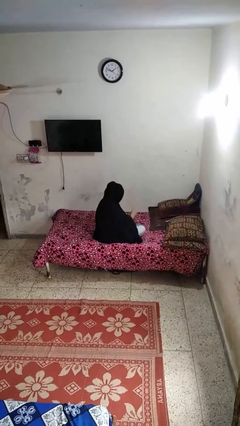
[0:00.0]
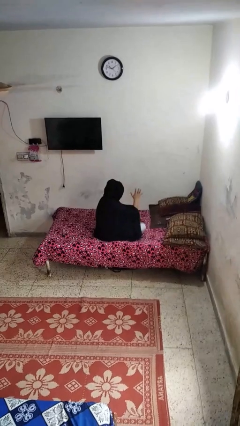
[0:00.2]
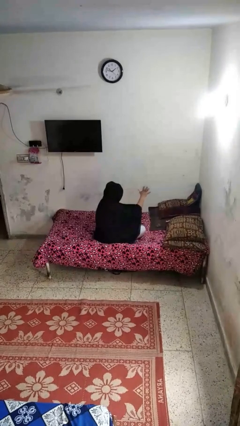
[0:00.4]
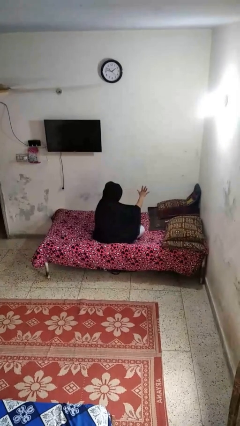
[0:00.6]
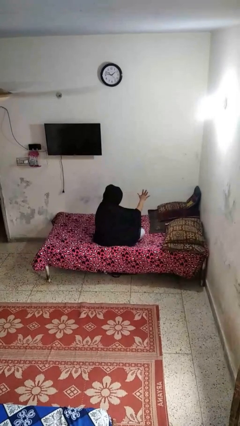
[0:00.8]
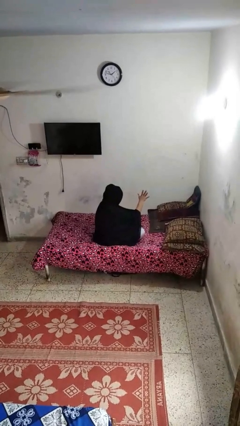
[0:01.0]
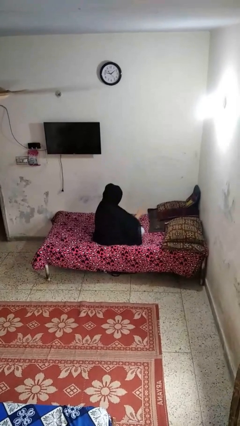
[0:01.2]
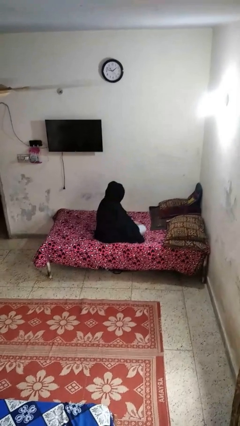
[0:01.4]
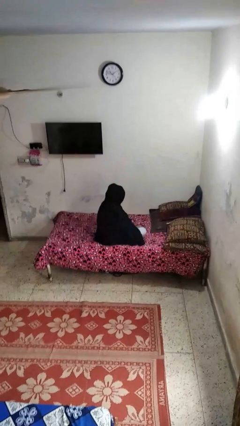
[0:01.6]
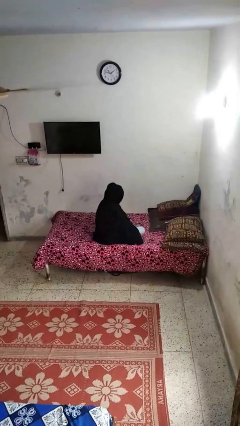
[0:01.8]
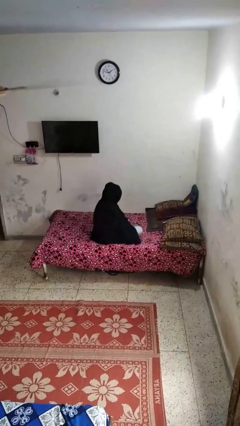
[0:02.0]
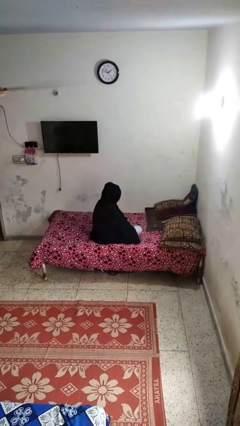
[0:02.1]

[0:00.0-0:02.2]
person gestures number five

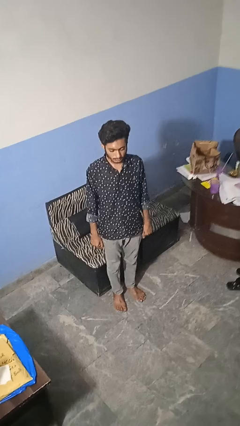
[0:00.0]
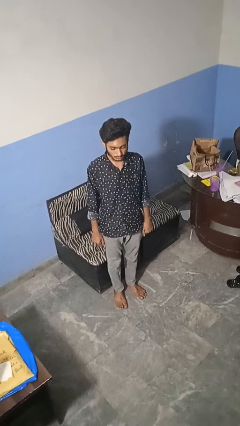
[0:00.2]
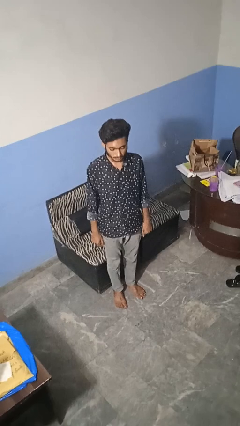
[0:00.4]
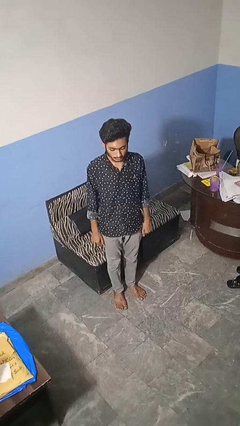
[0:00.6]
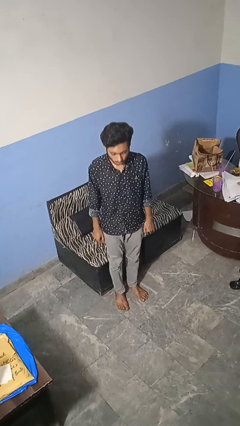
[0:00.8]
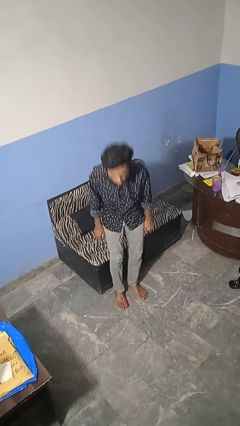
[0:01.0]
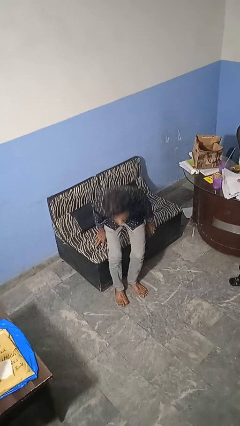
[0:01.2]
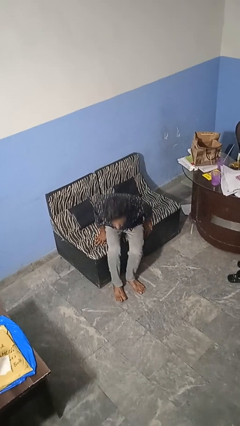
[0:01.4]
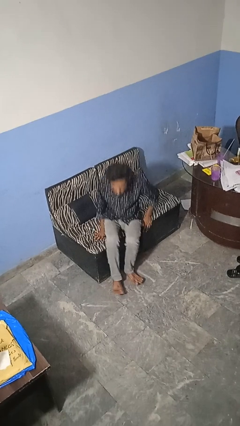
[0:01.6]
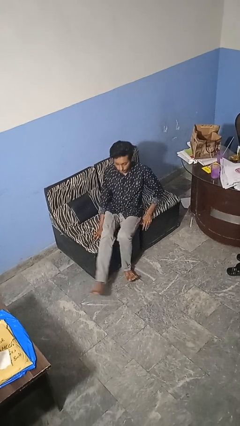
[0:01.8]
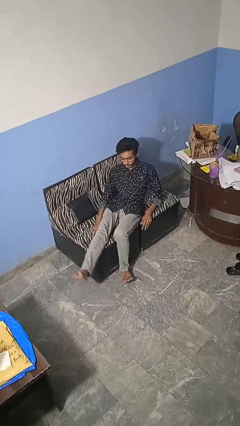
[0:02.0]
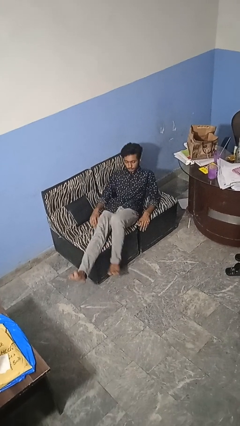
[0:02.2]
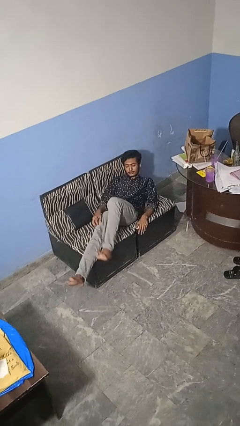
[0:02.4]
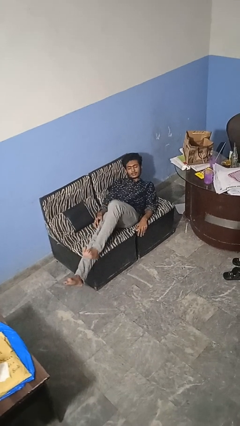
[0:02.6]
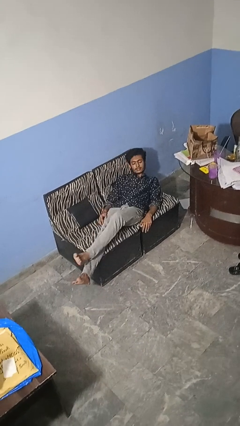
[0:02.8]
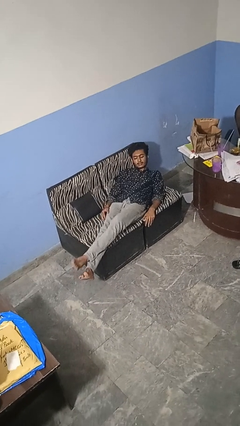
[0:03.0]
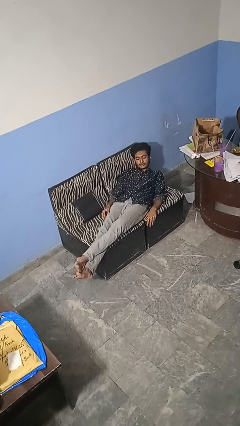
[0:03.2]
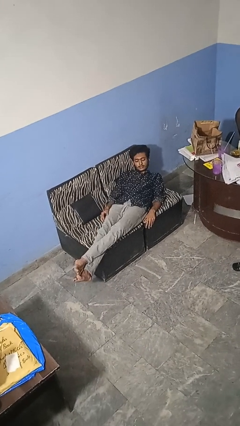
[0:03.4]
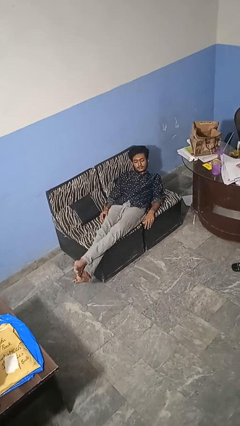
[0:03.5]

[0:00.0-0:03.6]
person lies down on couch

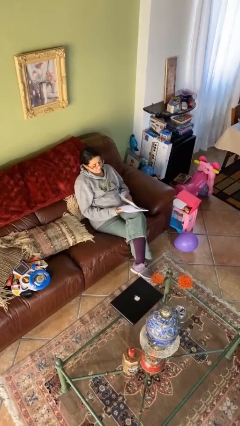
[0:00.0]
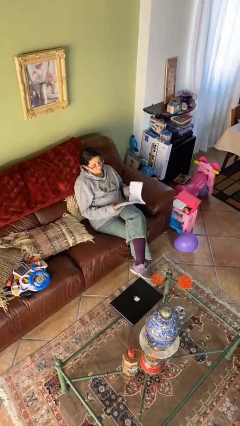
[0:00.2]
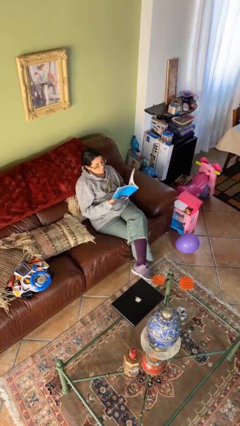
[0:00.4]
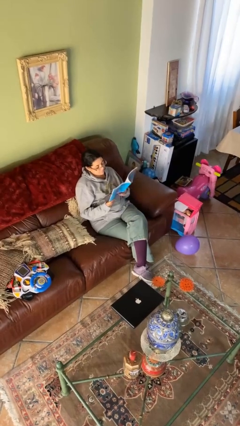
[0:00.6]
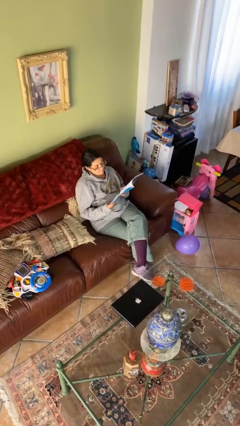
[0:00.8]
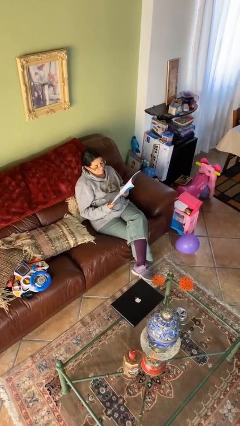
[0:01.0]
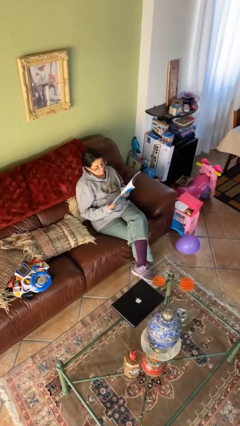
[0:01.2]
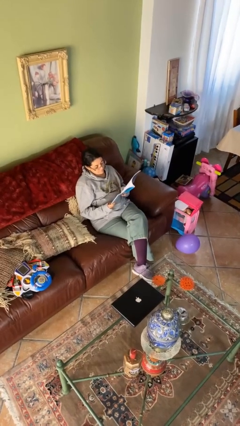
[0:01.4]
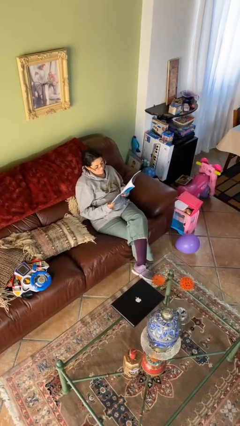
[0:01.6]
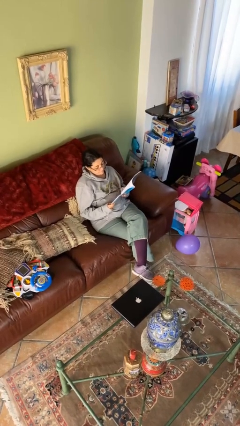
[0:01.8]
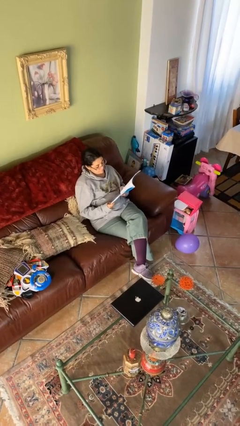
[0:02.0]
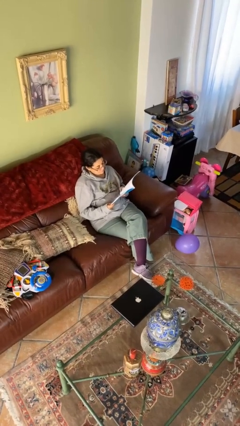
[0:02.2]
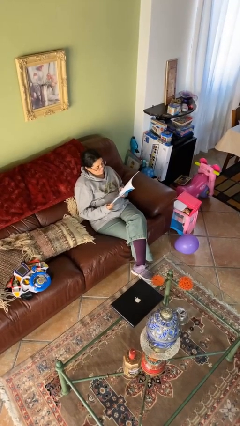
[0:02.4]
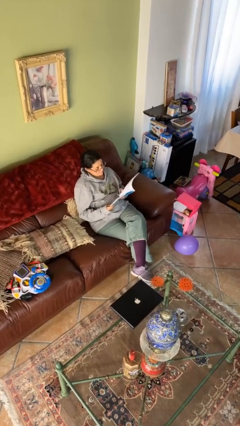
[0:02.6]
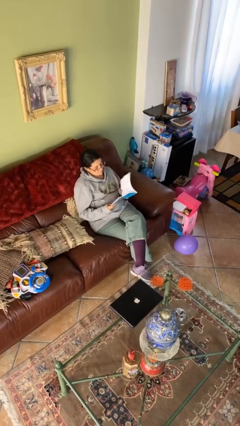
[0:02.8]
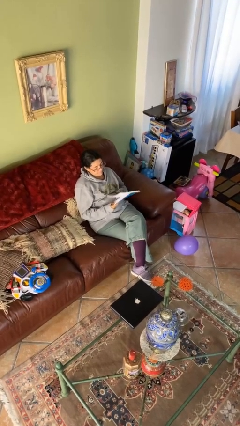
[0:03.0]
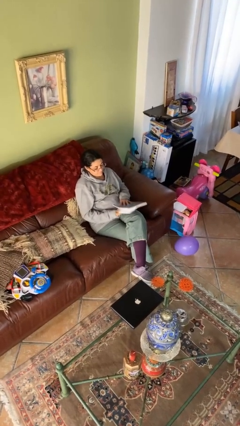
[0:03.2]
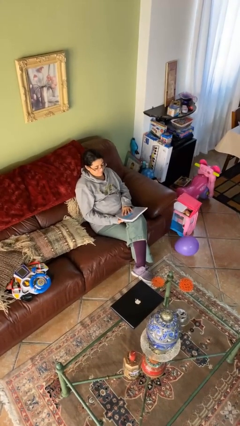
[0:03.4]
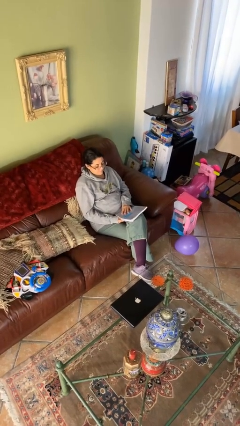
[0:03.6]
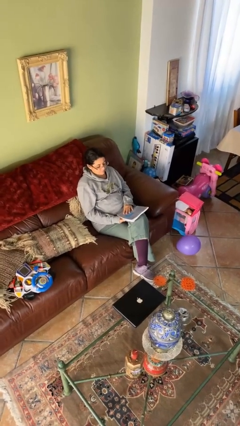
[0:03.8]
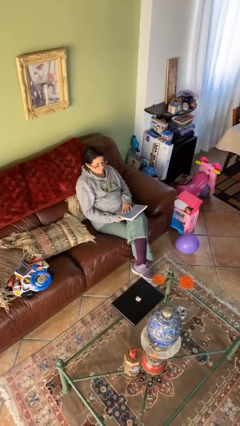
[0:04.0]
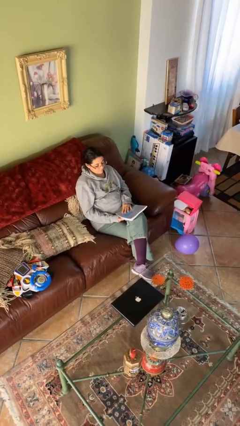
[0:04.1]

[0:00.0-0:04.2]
person reads document

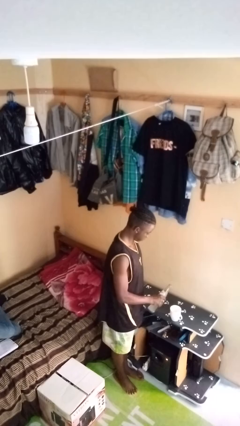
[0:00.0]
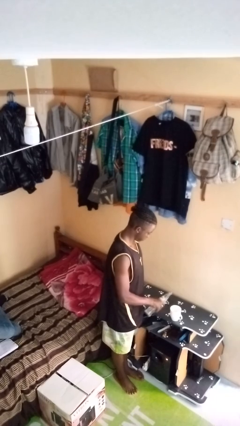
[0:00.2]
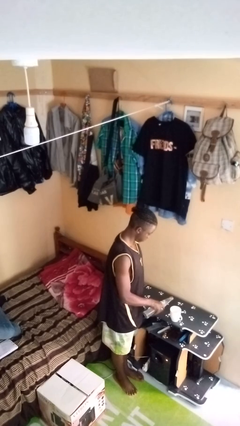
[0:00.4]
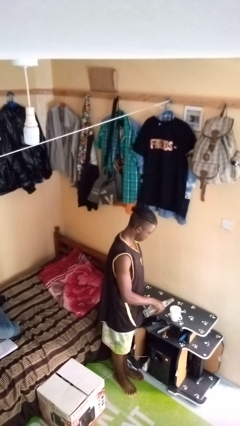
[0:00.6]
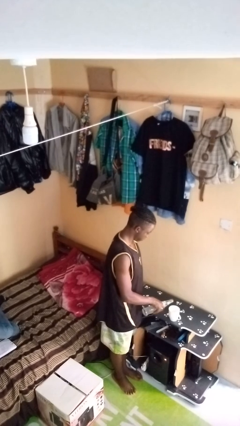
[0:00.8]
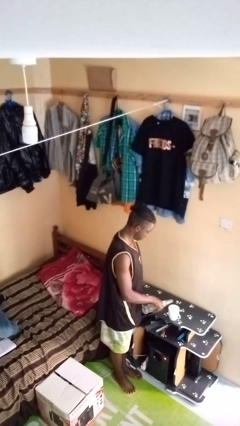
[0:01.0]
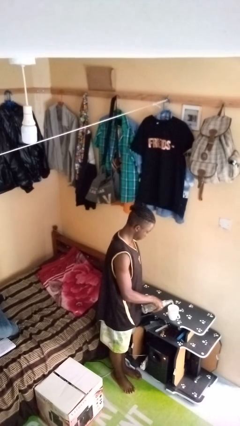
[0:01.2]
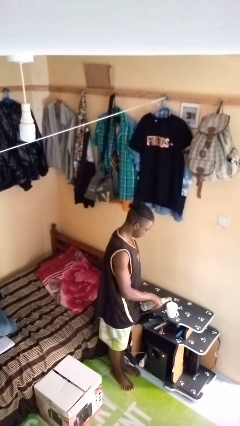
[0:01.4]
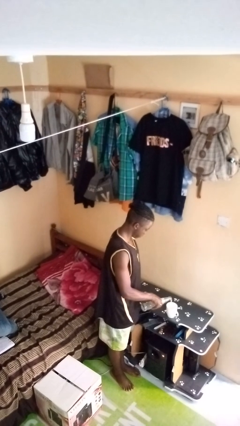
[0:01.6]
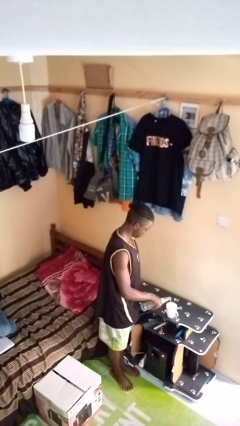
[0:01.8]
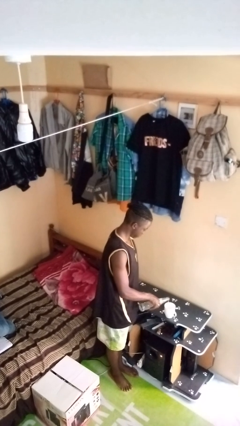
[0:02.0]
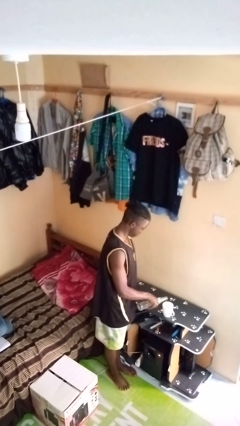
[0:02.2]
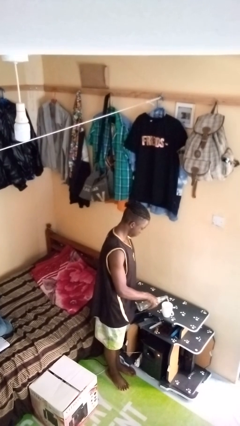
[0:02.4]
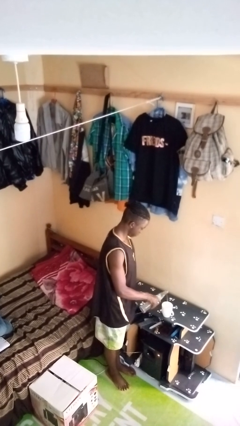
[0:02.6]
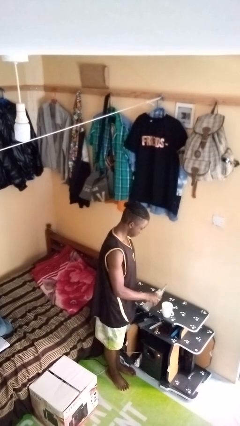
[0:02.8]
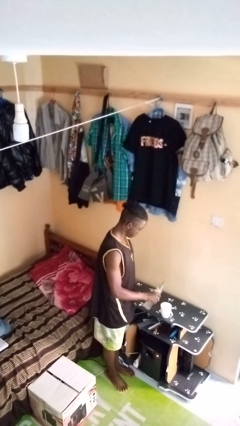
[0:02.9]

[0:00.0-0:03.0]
person pours liquid into cup

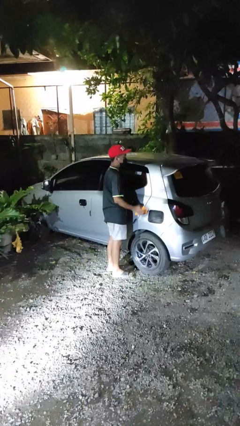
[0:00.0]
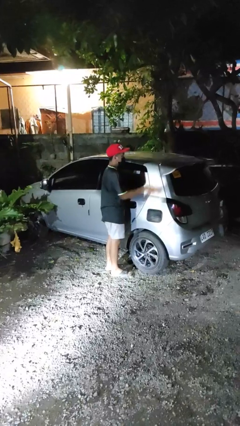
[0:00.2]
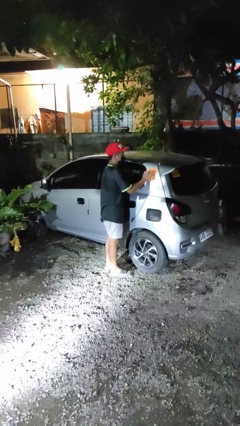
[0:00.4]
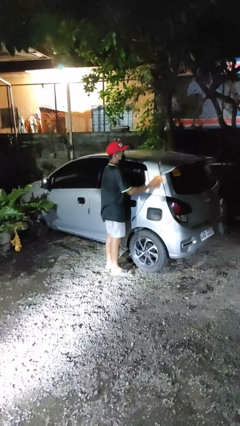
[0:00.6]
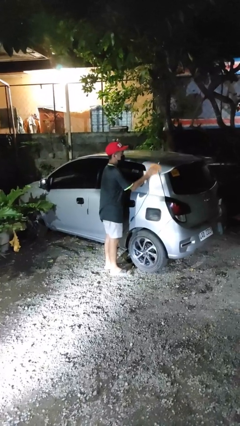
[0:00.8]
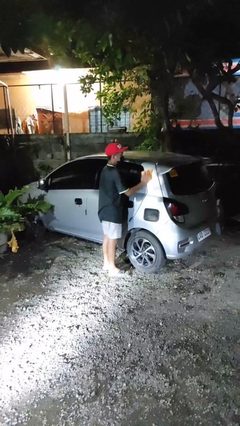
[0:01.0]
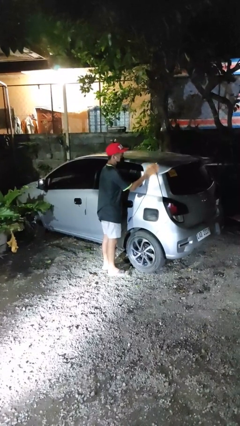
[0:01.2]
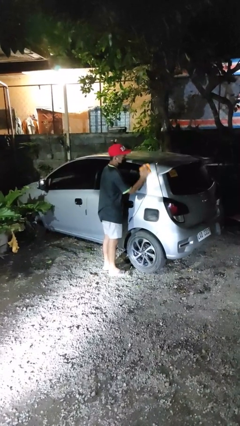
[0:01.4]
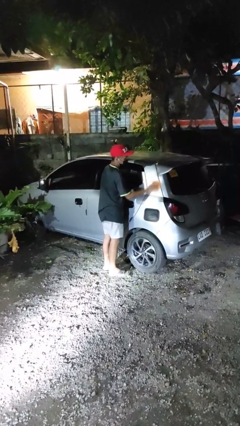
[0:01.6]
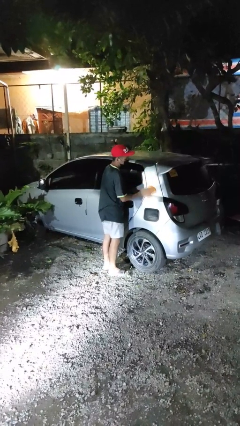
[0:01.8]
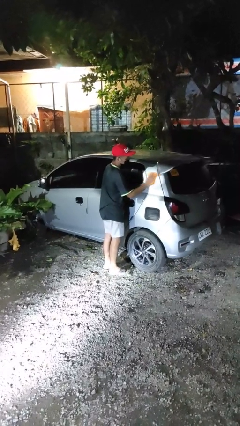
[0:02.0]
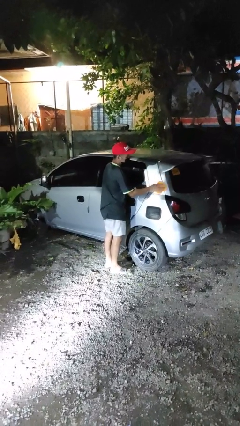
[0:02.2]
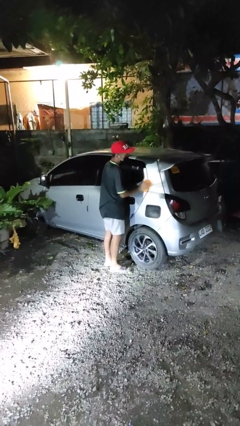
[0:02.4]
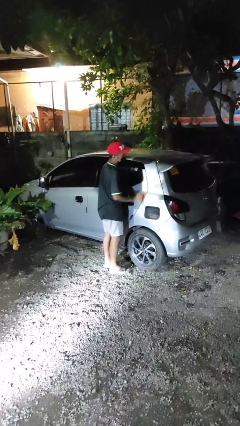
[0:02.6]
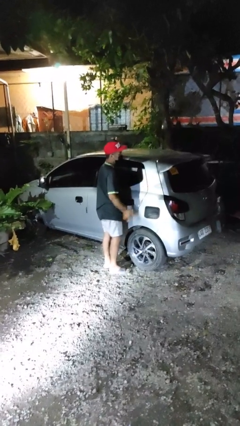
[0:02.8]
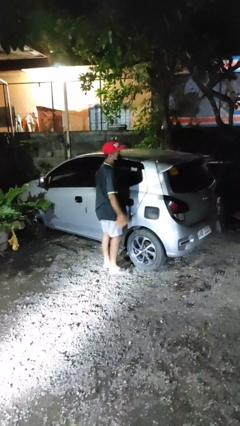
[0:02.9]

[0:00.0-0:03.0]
person polishes car with rag

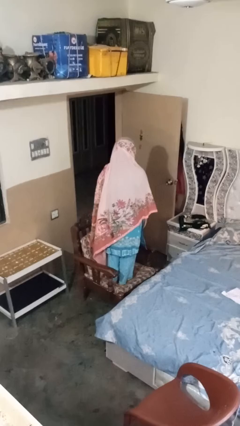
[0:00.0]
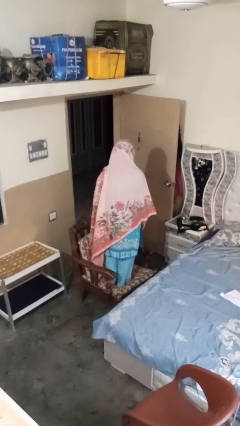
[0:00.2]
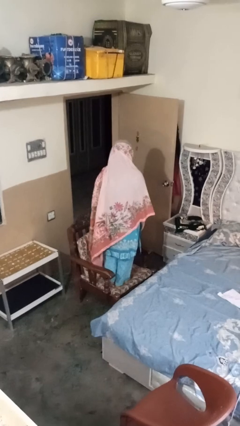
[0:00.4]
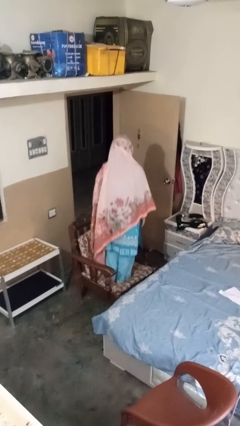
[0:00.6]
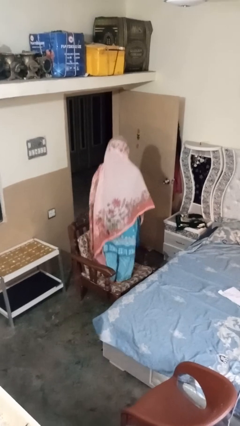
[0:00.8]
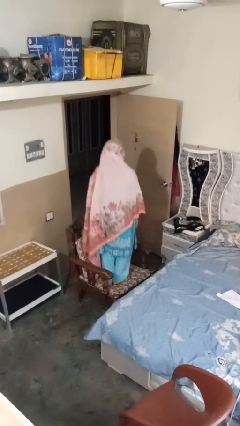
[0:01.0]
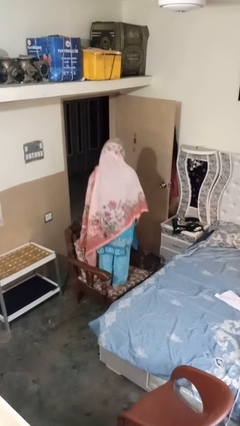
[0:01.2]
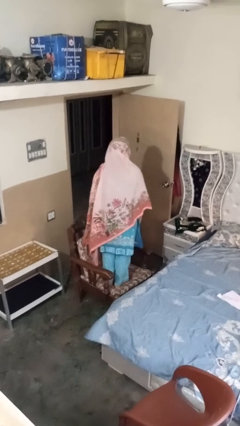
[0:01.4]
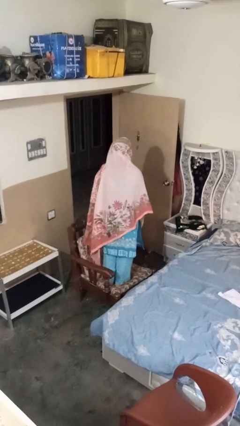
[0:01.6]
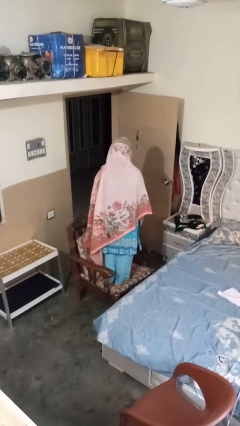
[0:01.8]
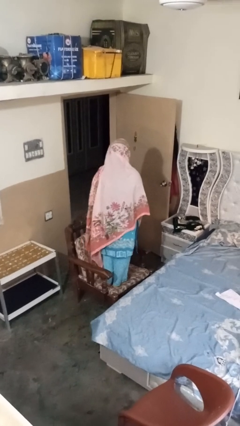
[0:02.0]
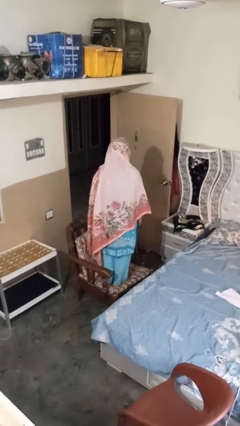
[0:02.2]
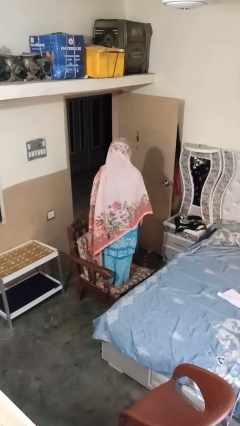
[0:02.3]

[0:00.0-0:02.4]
person jumps on couch
